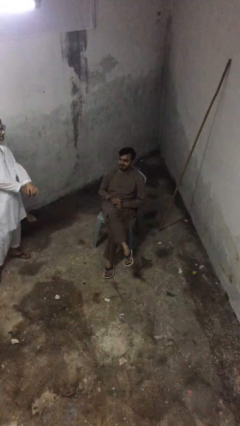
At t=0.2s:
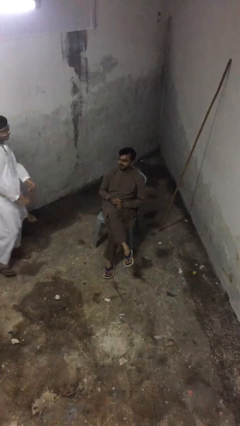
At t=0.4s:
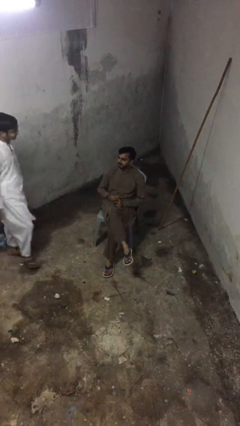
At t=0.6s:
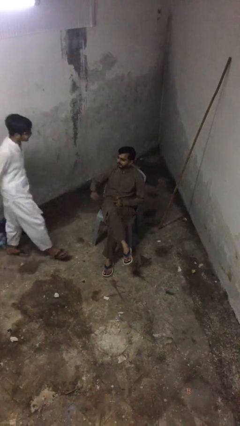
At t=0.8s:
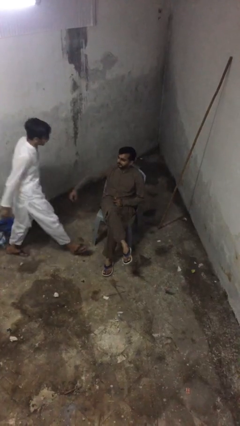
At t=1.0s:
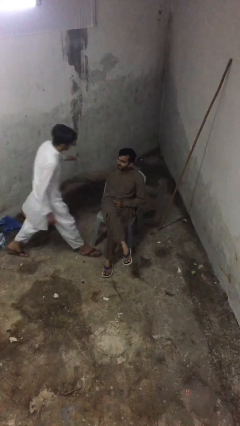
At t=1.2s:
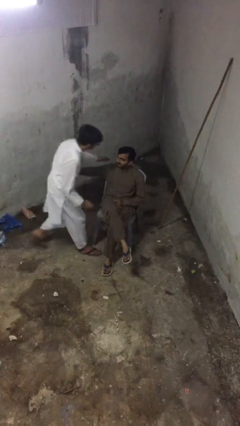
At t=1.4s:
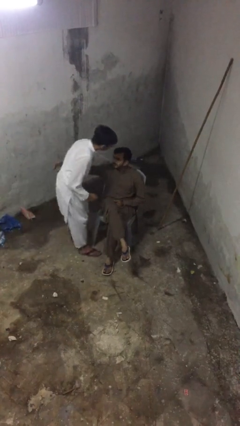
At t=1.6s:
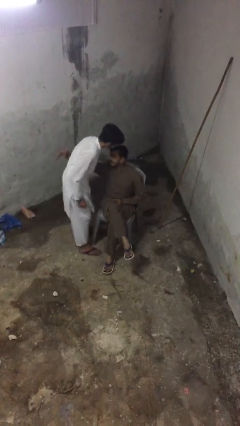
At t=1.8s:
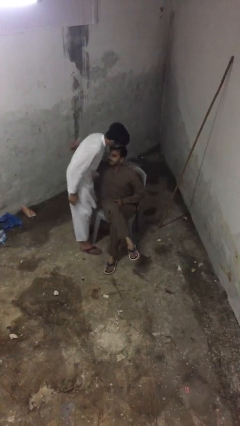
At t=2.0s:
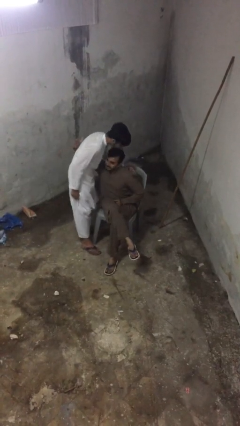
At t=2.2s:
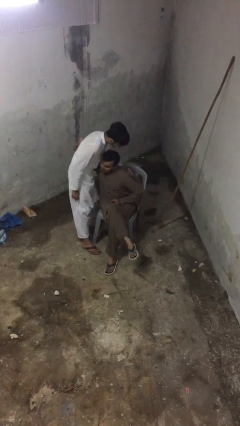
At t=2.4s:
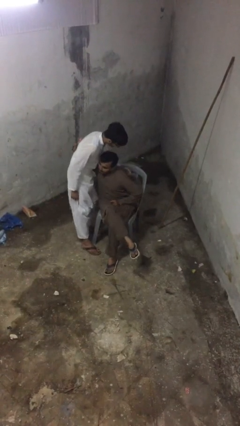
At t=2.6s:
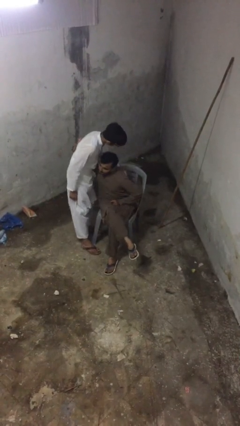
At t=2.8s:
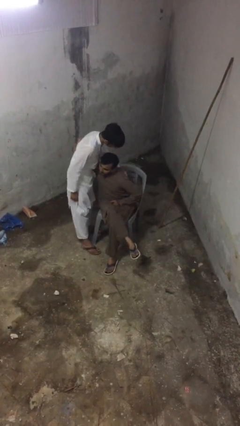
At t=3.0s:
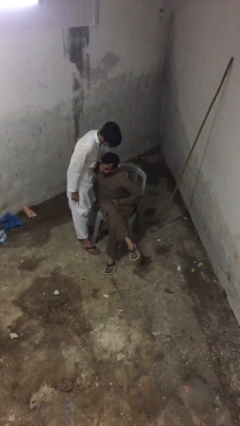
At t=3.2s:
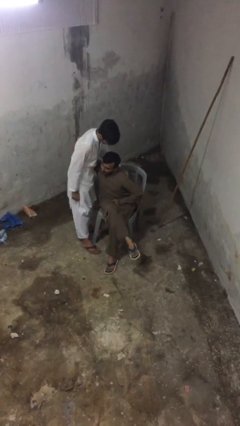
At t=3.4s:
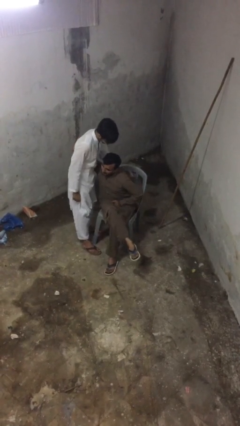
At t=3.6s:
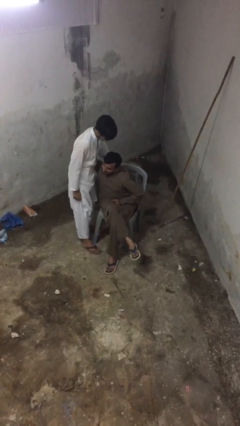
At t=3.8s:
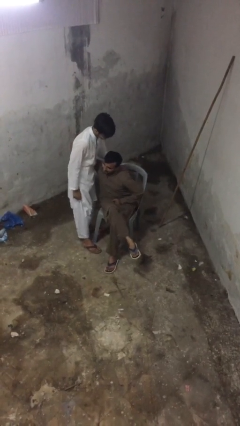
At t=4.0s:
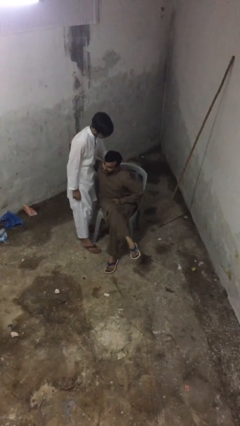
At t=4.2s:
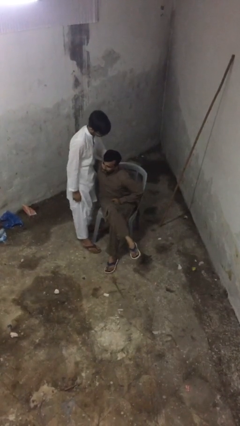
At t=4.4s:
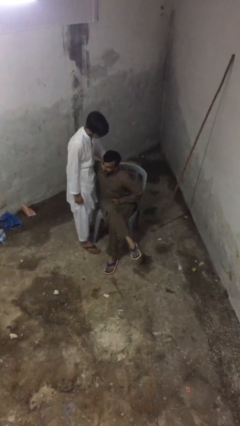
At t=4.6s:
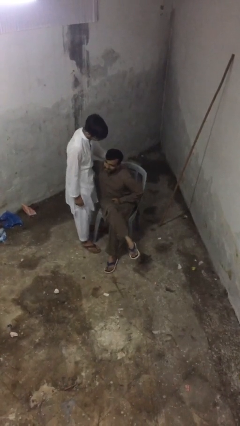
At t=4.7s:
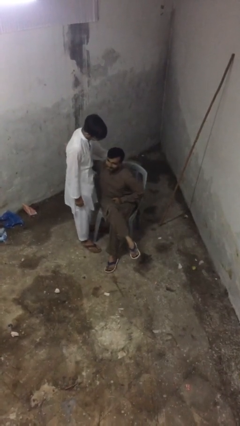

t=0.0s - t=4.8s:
person embraces person

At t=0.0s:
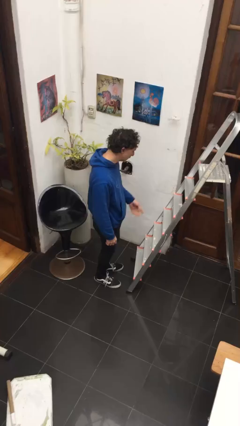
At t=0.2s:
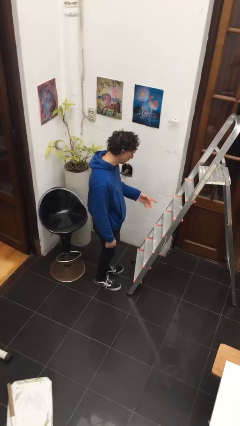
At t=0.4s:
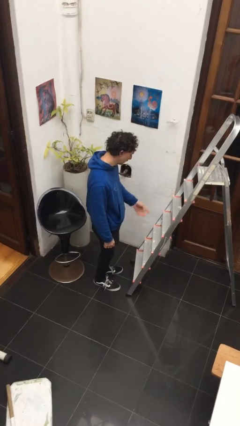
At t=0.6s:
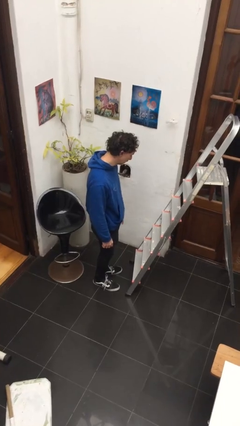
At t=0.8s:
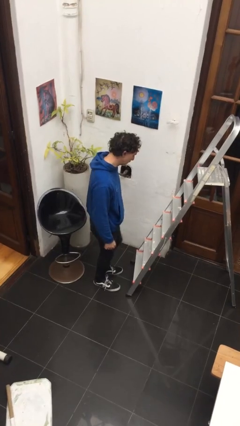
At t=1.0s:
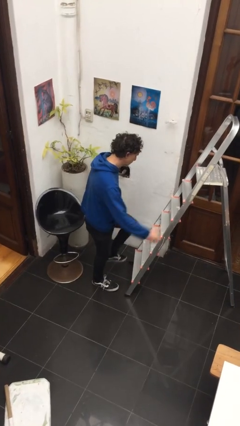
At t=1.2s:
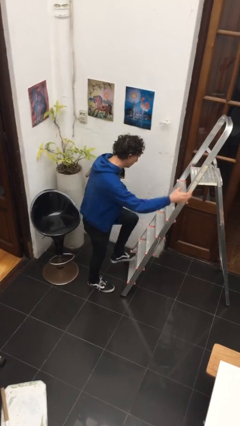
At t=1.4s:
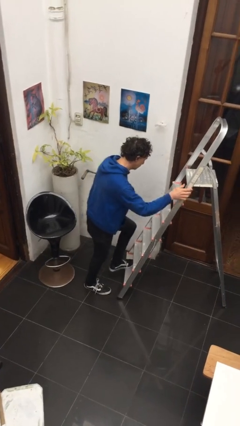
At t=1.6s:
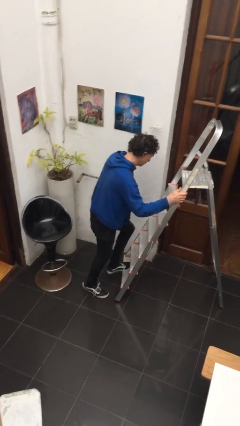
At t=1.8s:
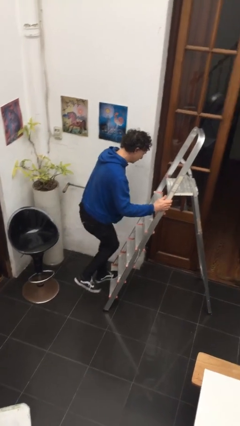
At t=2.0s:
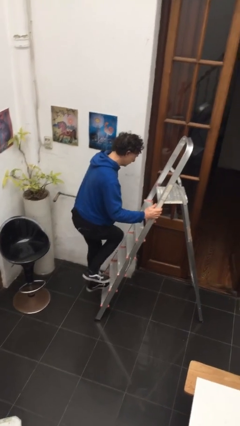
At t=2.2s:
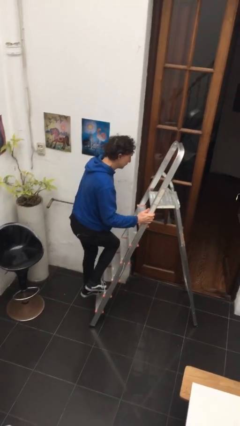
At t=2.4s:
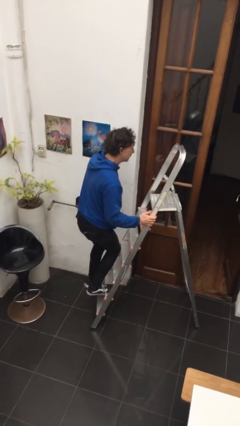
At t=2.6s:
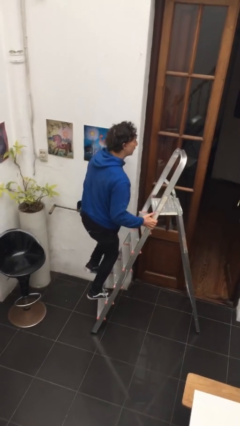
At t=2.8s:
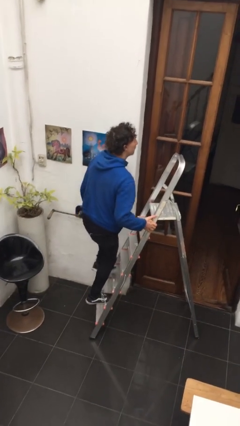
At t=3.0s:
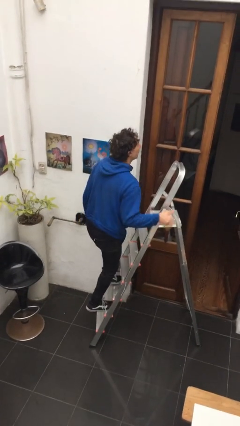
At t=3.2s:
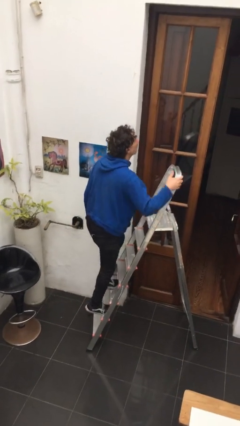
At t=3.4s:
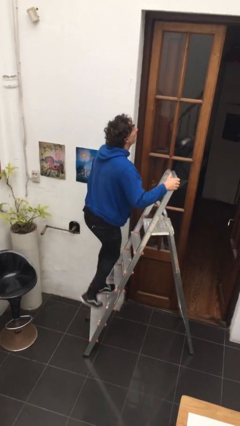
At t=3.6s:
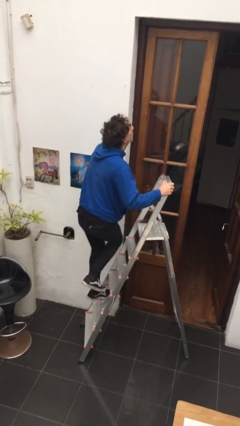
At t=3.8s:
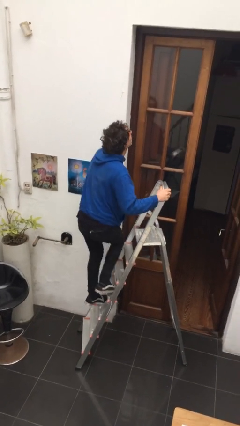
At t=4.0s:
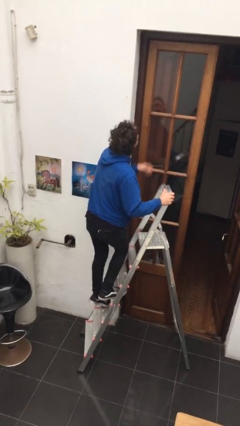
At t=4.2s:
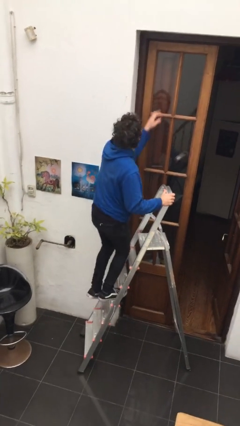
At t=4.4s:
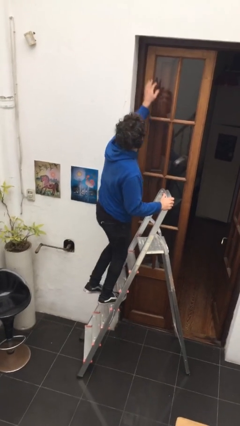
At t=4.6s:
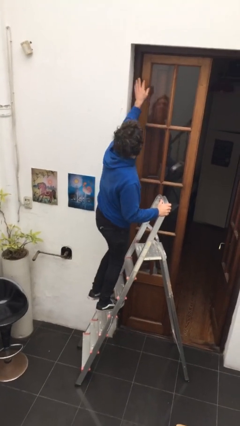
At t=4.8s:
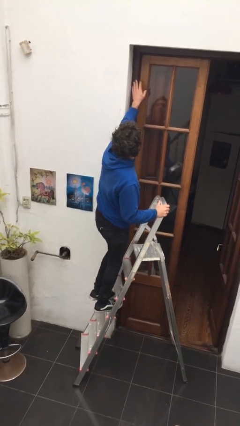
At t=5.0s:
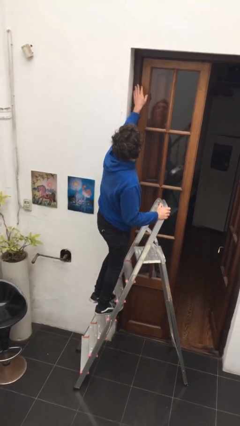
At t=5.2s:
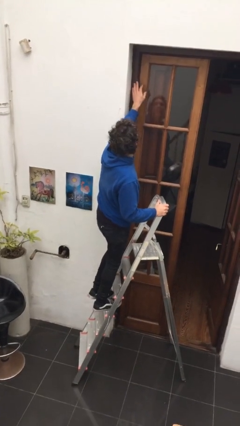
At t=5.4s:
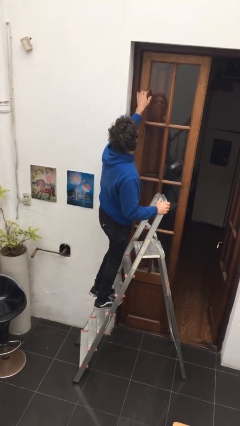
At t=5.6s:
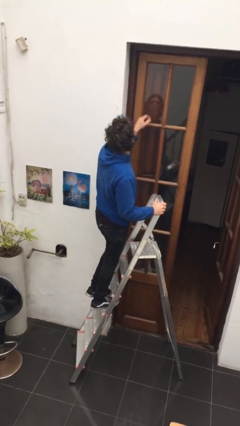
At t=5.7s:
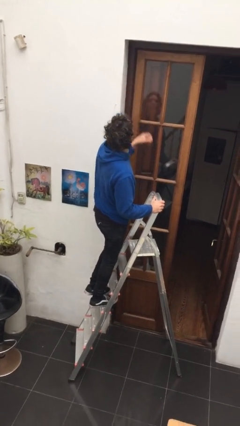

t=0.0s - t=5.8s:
person climbs up ladder

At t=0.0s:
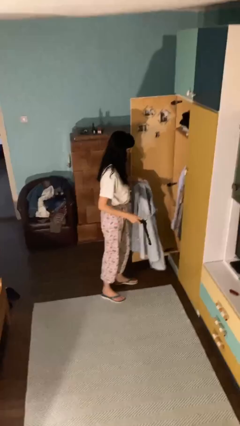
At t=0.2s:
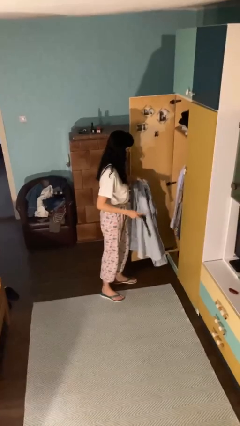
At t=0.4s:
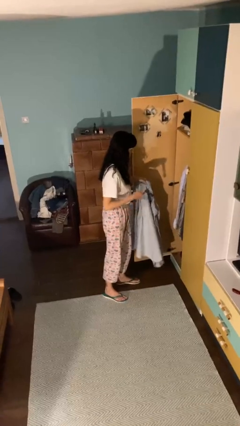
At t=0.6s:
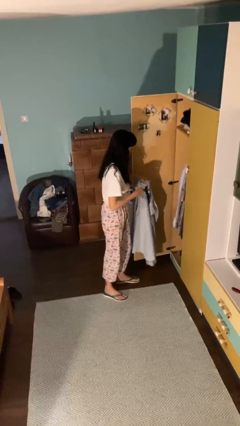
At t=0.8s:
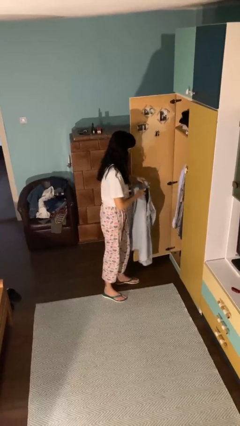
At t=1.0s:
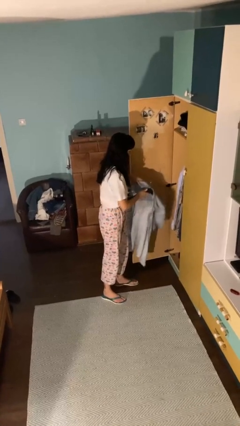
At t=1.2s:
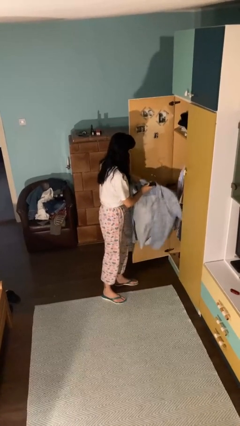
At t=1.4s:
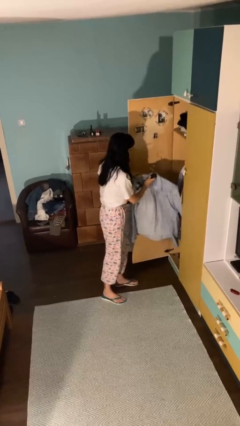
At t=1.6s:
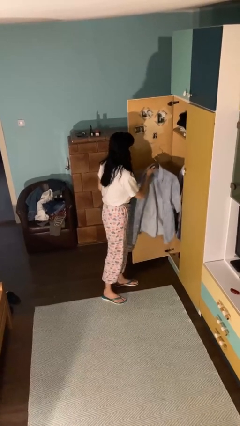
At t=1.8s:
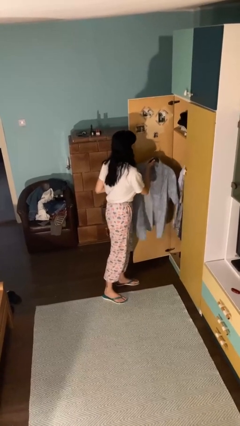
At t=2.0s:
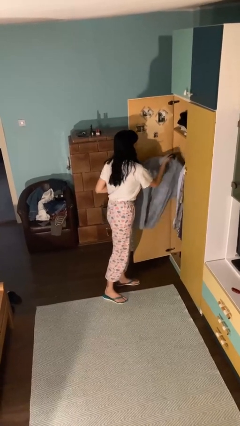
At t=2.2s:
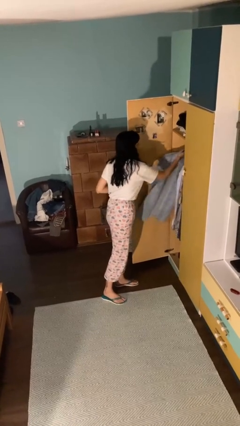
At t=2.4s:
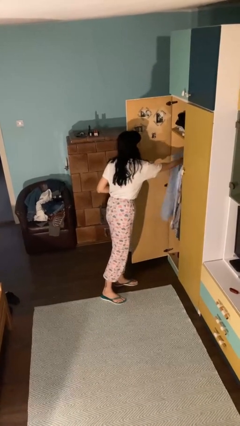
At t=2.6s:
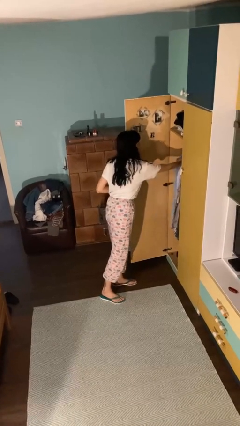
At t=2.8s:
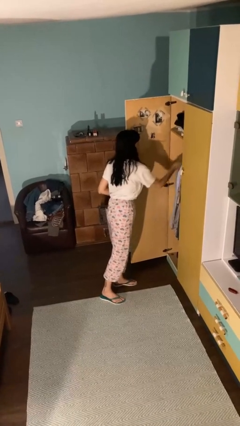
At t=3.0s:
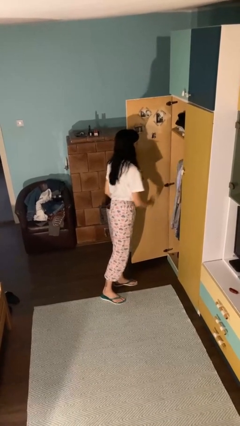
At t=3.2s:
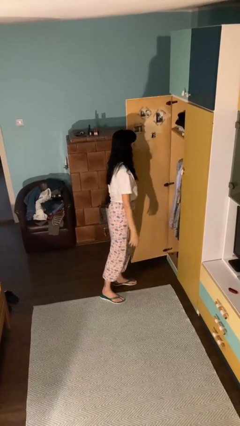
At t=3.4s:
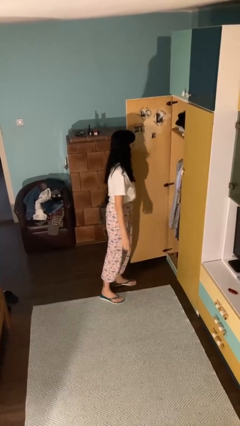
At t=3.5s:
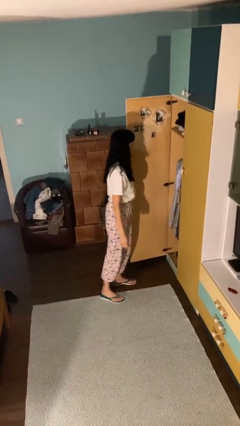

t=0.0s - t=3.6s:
person puts clothes into closet

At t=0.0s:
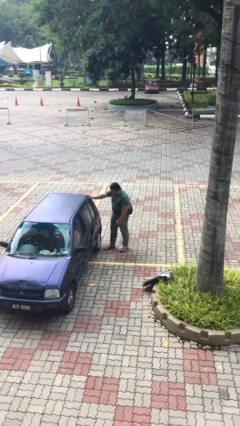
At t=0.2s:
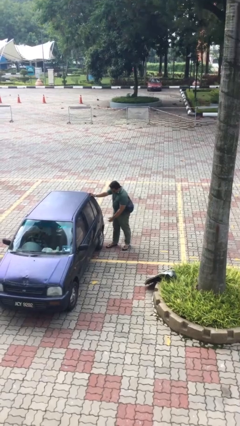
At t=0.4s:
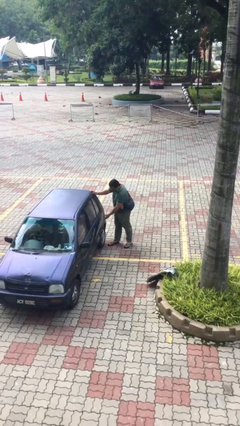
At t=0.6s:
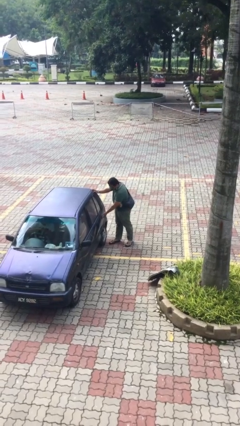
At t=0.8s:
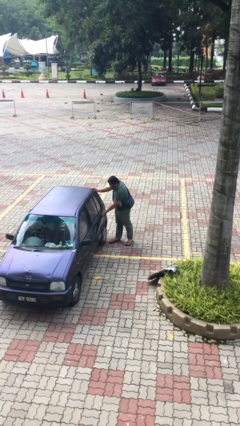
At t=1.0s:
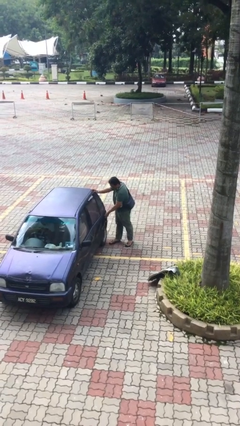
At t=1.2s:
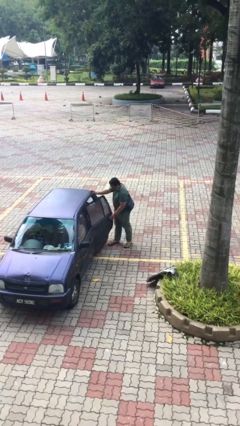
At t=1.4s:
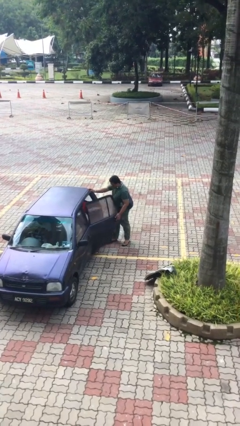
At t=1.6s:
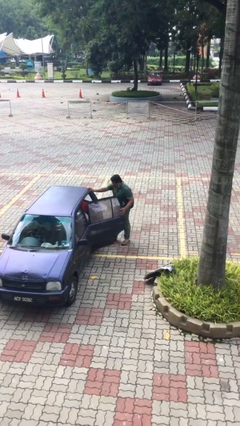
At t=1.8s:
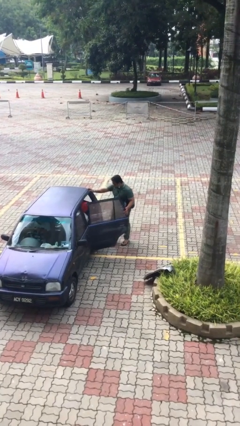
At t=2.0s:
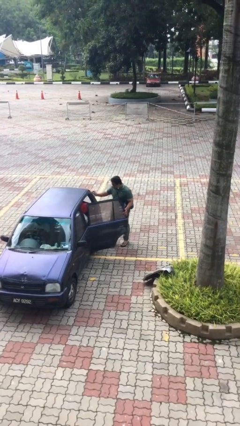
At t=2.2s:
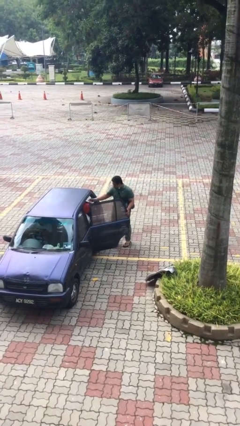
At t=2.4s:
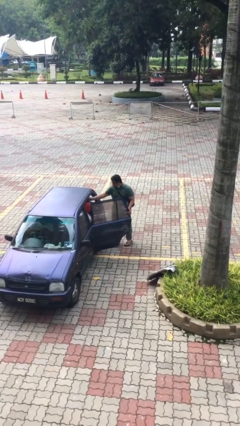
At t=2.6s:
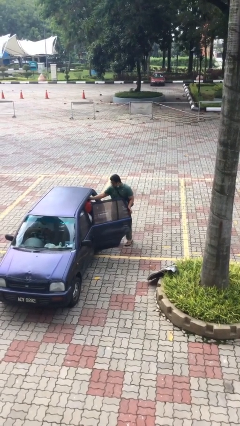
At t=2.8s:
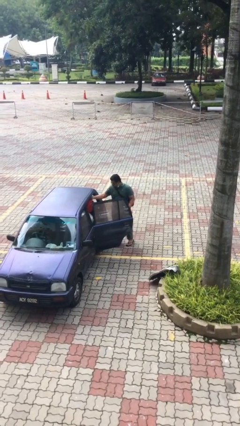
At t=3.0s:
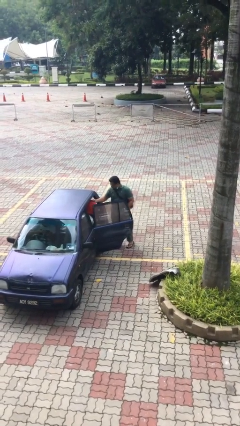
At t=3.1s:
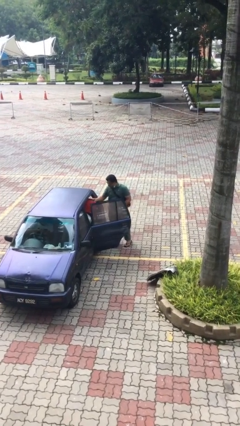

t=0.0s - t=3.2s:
person opens car door
